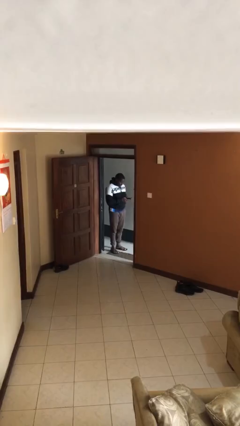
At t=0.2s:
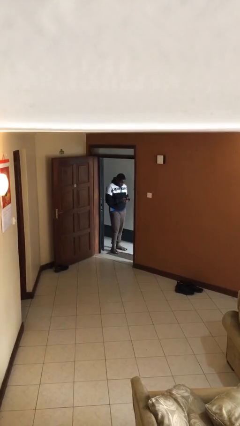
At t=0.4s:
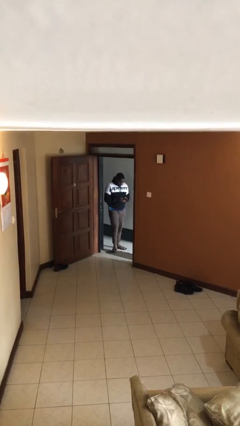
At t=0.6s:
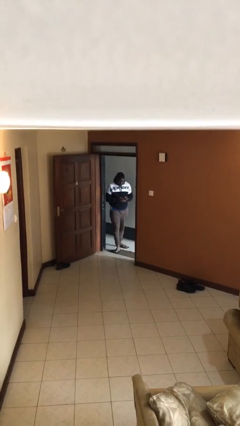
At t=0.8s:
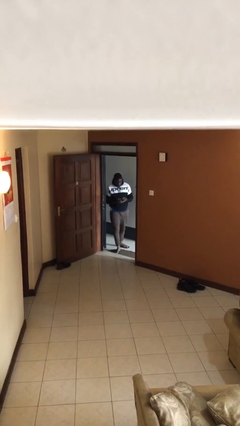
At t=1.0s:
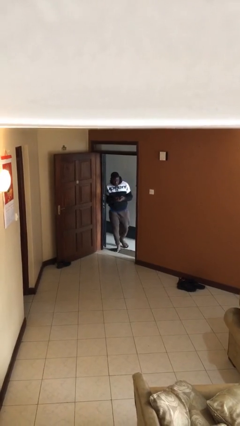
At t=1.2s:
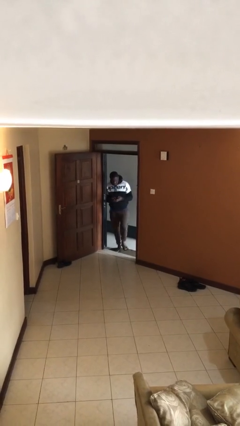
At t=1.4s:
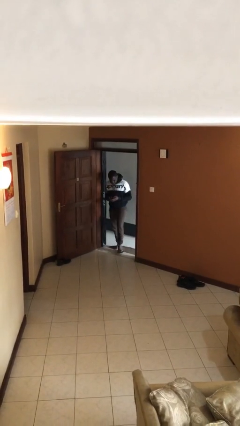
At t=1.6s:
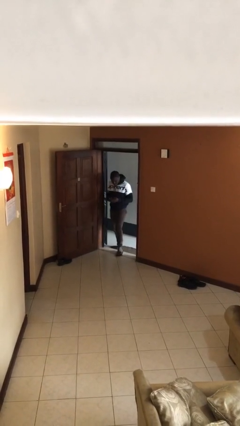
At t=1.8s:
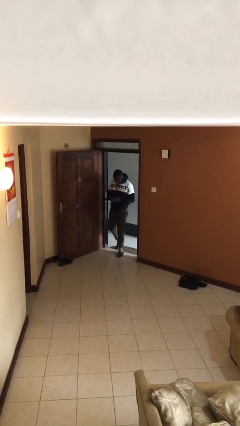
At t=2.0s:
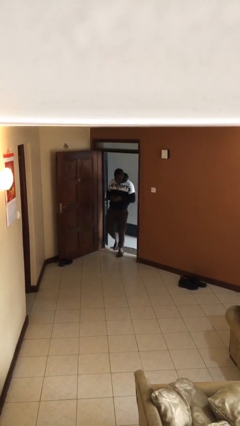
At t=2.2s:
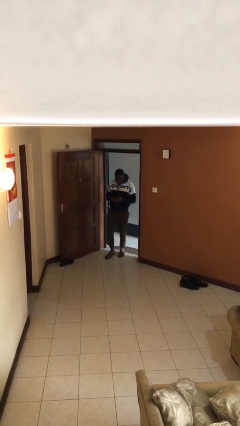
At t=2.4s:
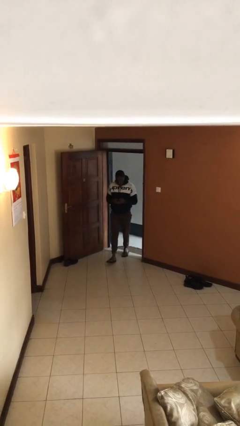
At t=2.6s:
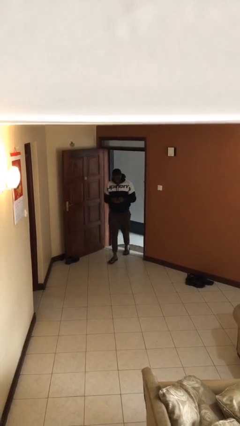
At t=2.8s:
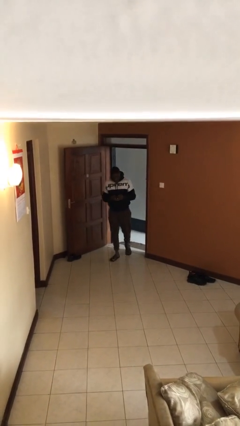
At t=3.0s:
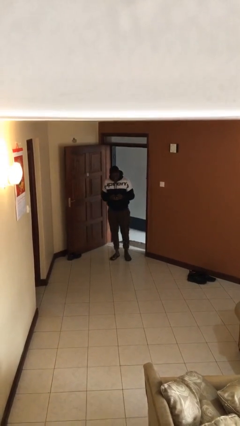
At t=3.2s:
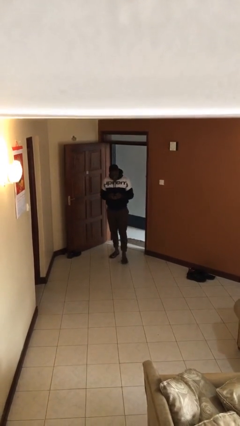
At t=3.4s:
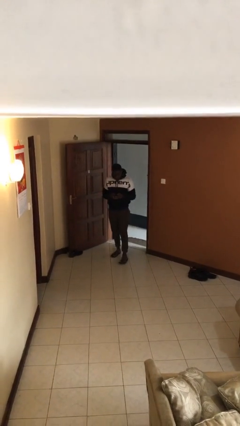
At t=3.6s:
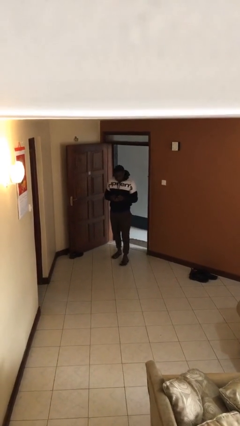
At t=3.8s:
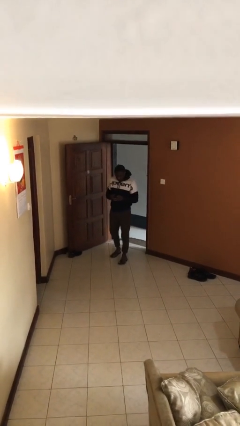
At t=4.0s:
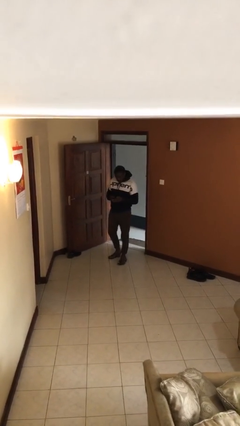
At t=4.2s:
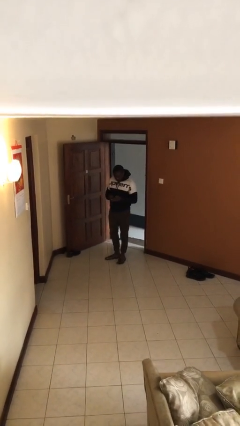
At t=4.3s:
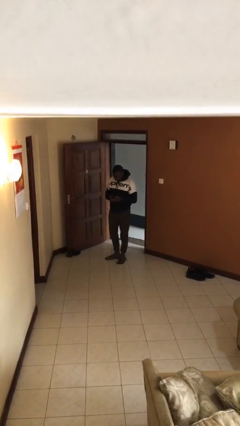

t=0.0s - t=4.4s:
person enters scene through structure

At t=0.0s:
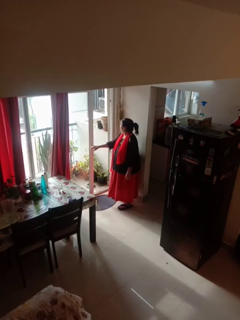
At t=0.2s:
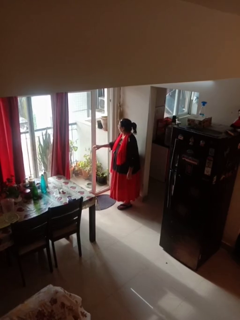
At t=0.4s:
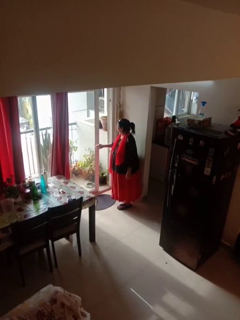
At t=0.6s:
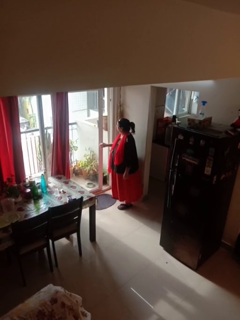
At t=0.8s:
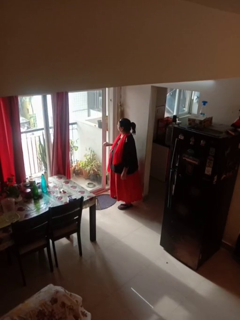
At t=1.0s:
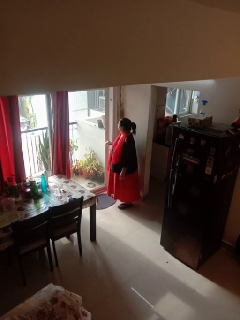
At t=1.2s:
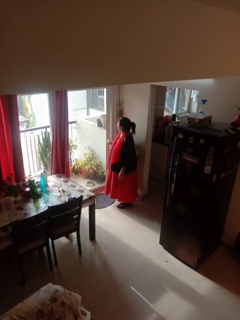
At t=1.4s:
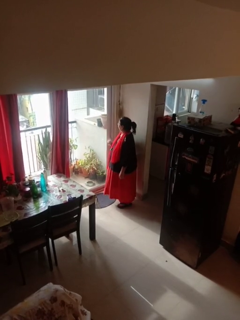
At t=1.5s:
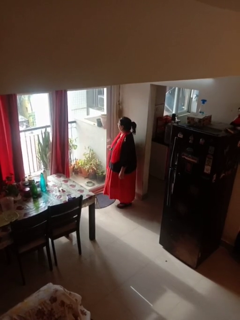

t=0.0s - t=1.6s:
person closes home window

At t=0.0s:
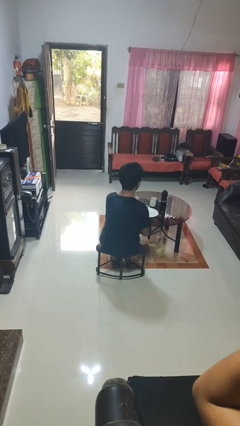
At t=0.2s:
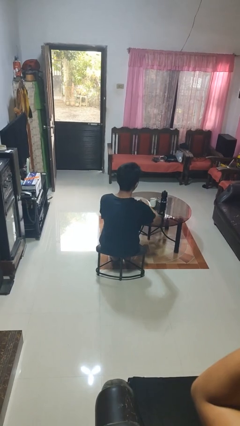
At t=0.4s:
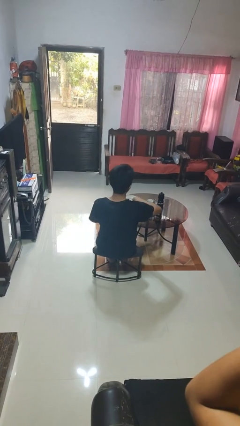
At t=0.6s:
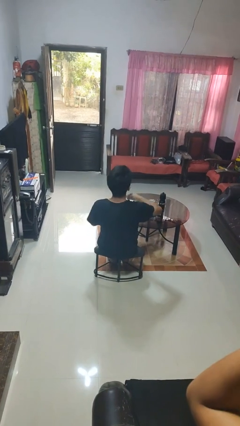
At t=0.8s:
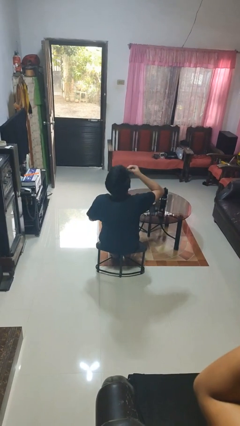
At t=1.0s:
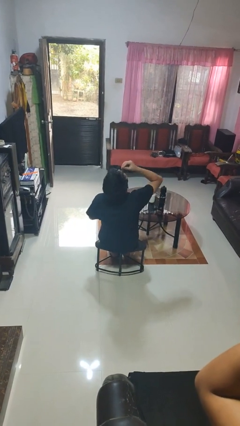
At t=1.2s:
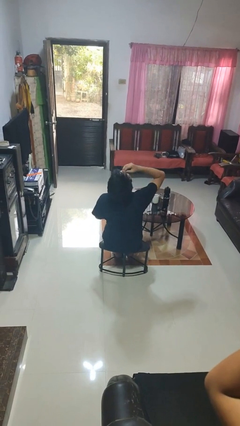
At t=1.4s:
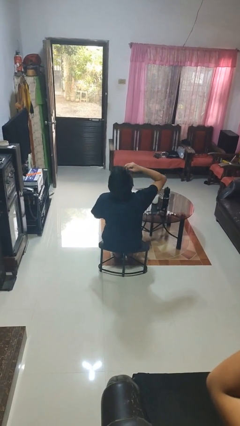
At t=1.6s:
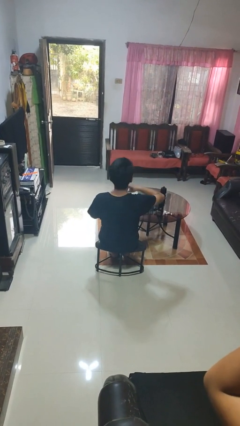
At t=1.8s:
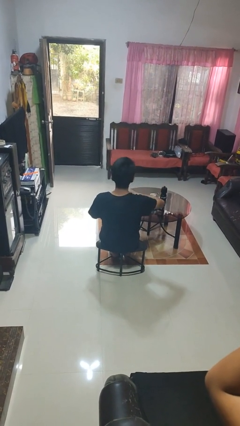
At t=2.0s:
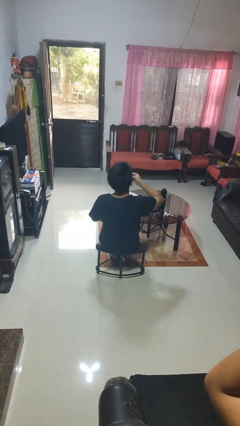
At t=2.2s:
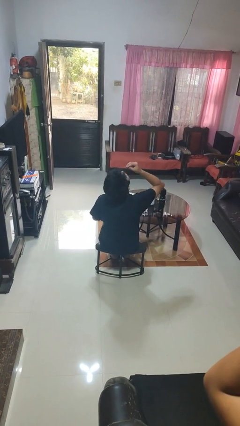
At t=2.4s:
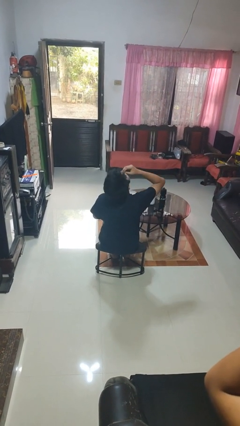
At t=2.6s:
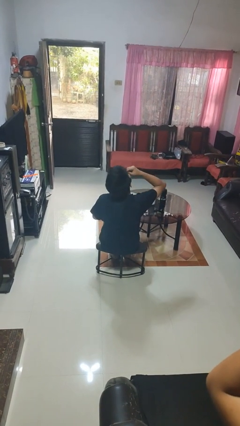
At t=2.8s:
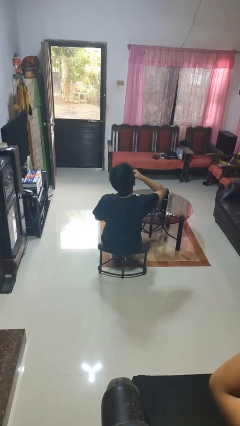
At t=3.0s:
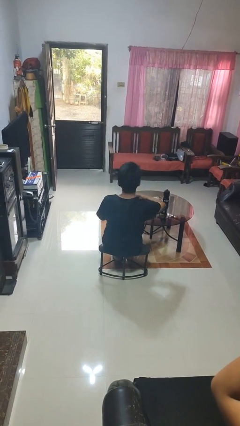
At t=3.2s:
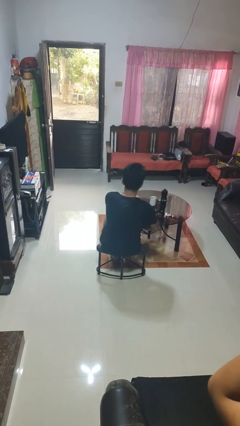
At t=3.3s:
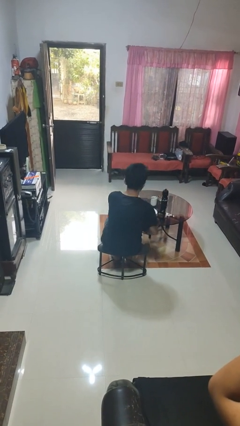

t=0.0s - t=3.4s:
person eats with hands

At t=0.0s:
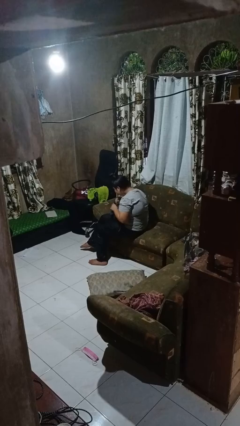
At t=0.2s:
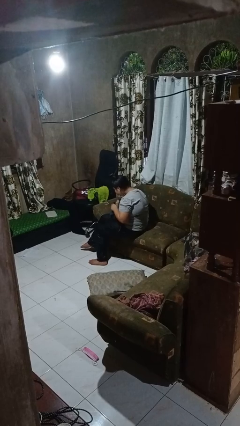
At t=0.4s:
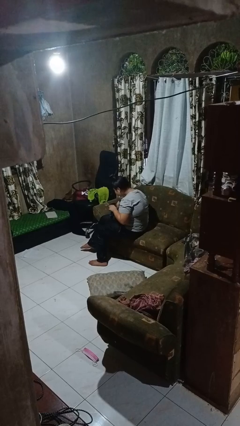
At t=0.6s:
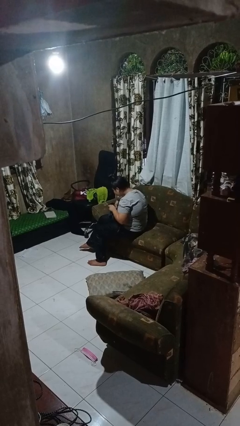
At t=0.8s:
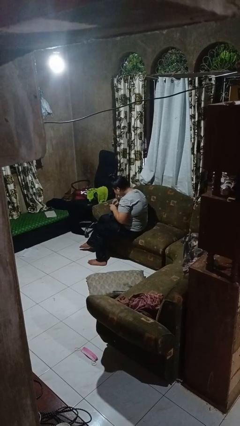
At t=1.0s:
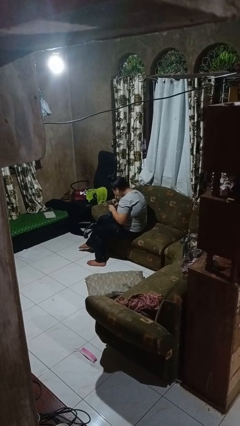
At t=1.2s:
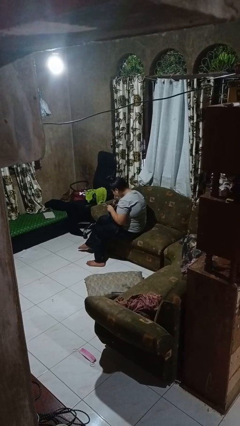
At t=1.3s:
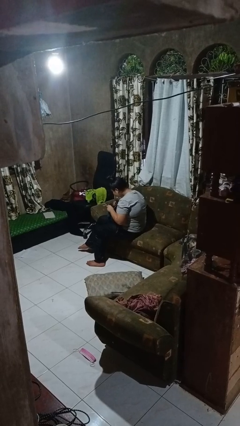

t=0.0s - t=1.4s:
person searches in purse

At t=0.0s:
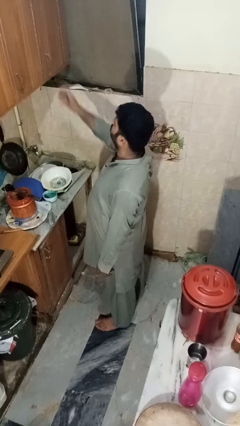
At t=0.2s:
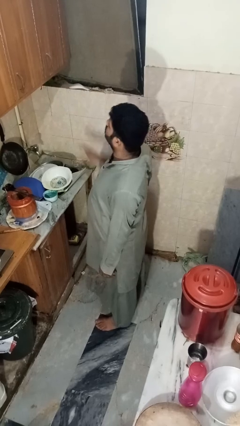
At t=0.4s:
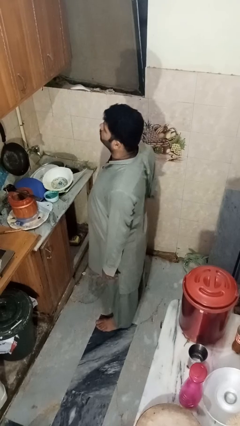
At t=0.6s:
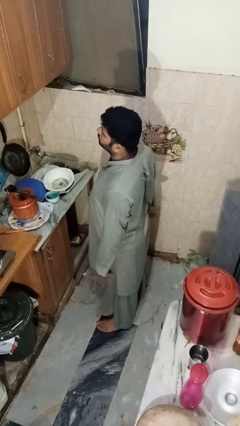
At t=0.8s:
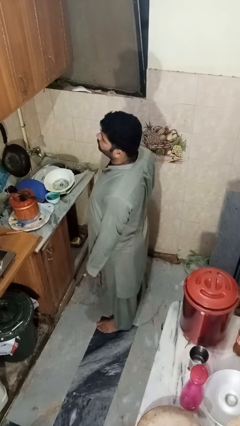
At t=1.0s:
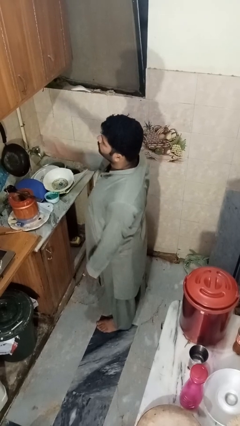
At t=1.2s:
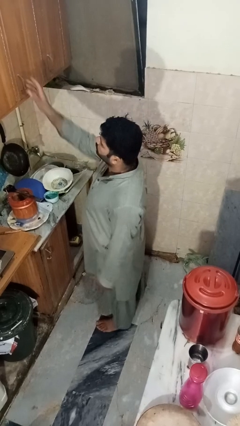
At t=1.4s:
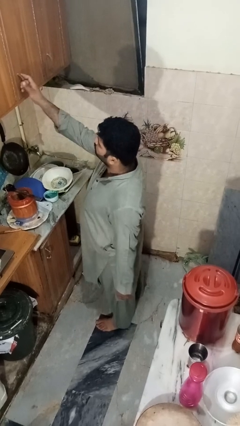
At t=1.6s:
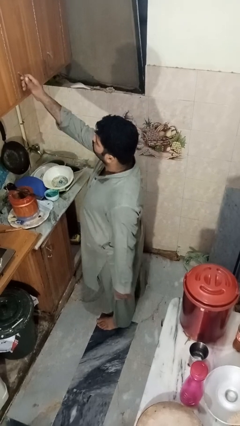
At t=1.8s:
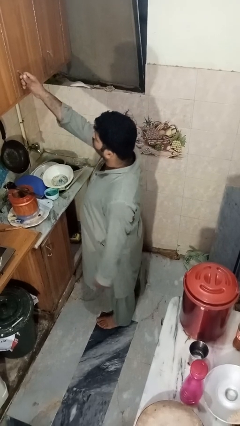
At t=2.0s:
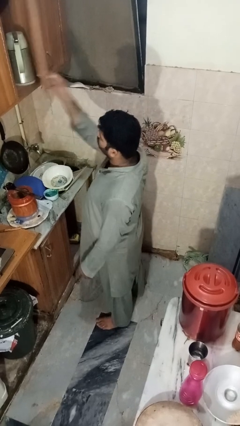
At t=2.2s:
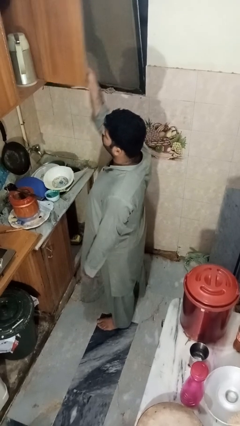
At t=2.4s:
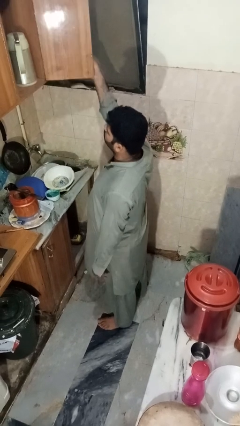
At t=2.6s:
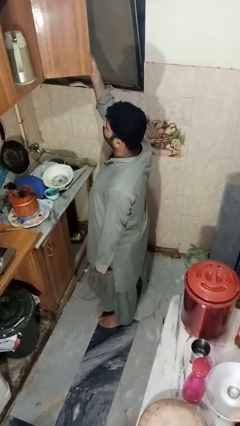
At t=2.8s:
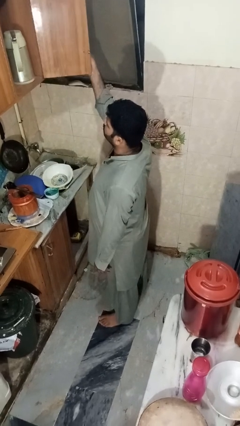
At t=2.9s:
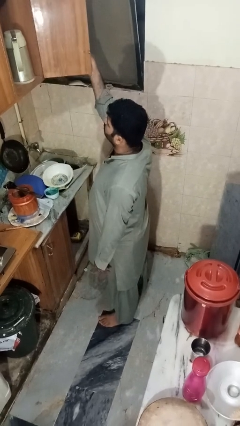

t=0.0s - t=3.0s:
person opens cabinet

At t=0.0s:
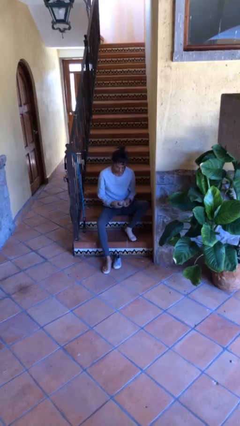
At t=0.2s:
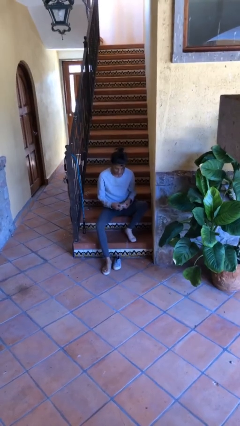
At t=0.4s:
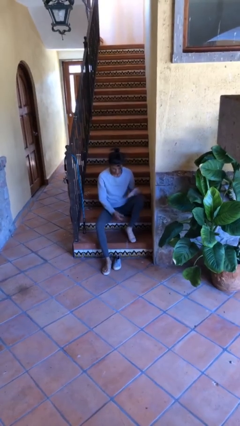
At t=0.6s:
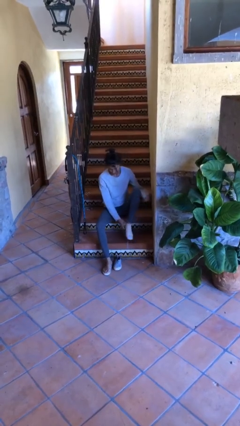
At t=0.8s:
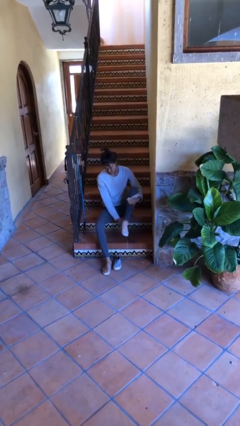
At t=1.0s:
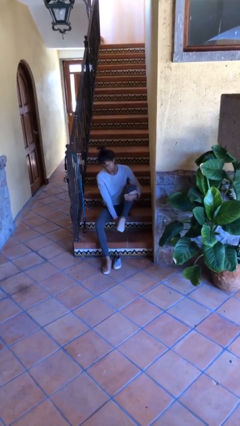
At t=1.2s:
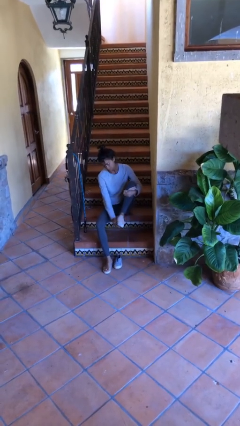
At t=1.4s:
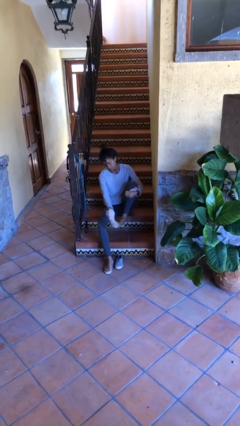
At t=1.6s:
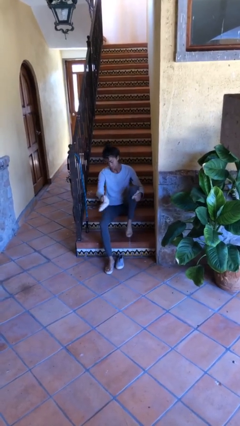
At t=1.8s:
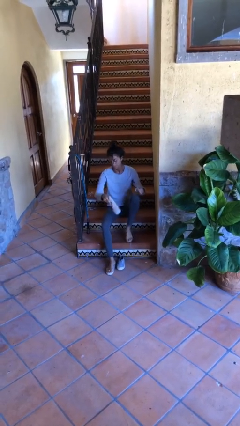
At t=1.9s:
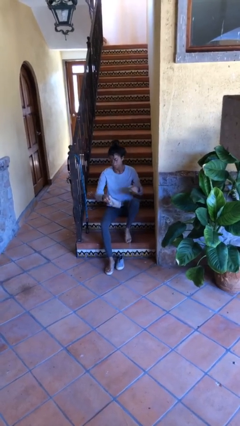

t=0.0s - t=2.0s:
person takes off socks

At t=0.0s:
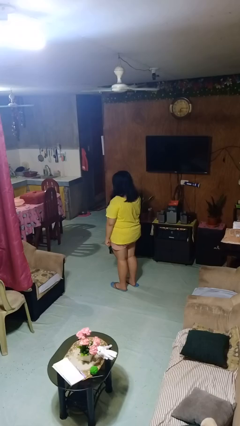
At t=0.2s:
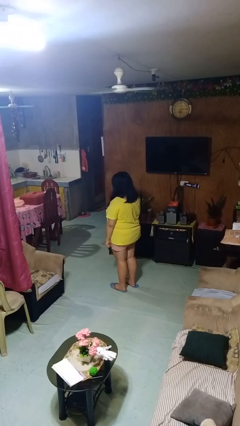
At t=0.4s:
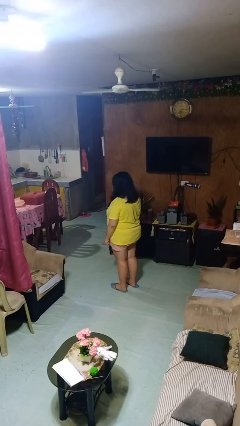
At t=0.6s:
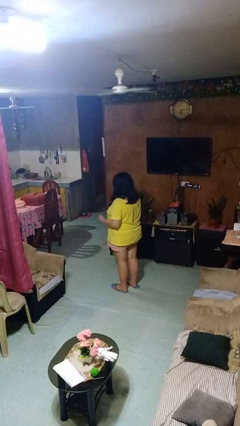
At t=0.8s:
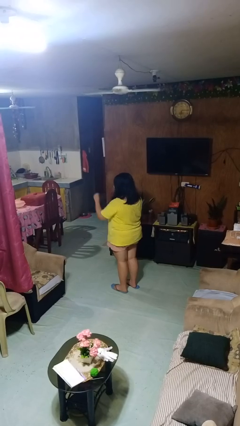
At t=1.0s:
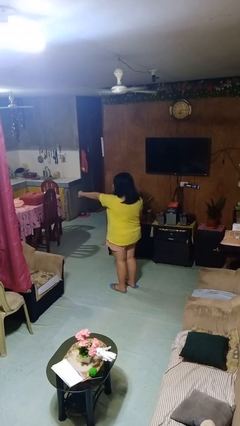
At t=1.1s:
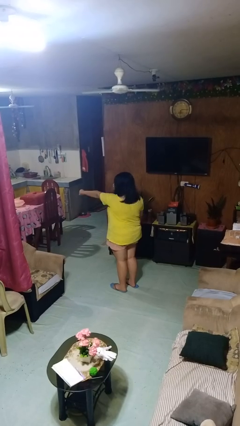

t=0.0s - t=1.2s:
person punches

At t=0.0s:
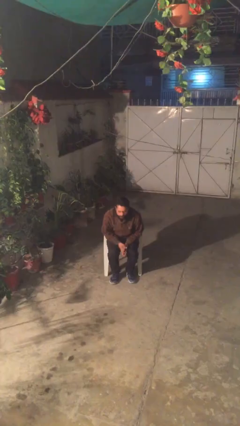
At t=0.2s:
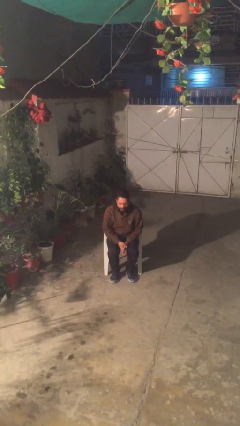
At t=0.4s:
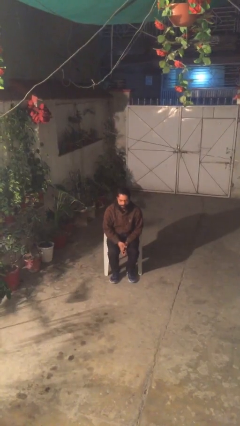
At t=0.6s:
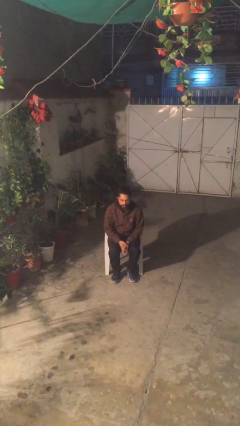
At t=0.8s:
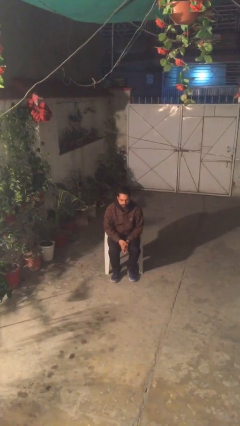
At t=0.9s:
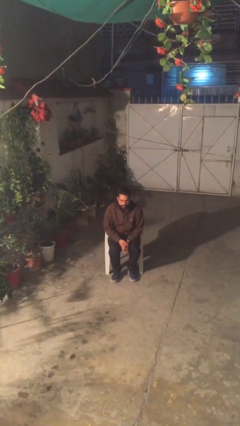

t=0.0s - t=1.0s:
person sits down
